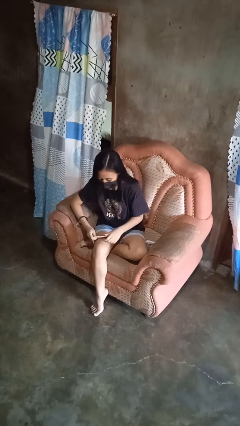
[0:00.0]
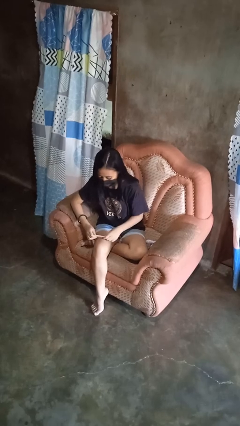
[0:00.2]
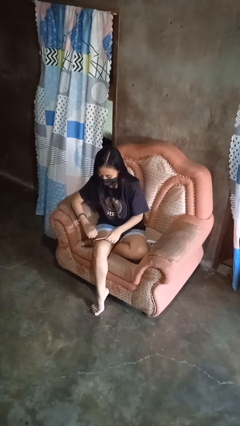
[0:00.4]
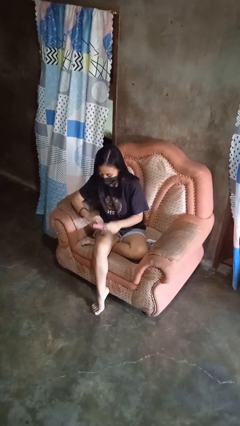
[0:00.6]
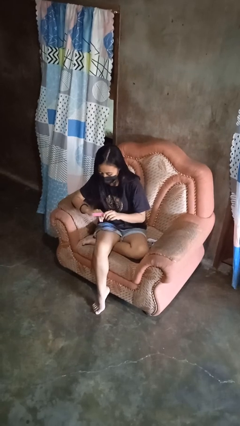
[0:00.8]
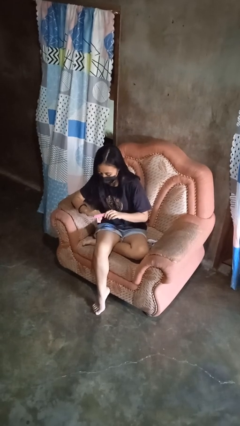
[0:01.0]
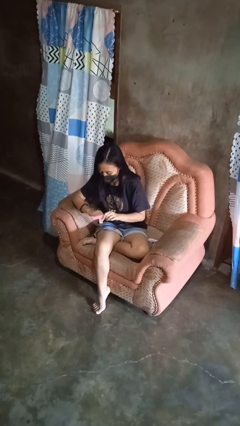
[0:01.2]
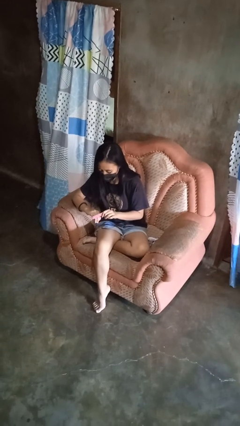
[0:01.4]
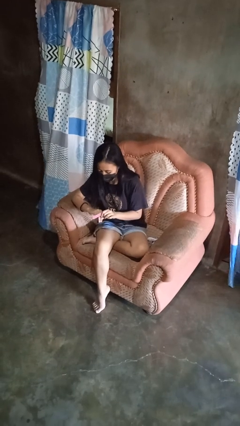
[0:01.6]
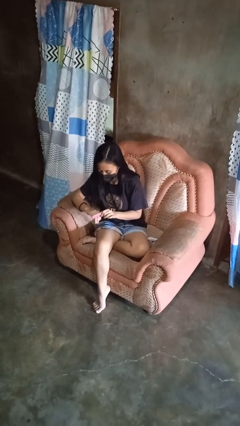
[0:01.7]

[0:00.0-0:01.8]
person files fingernails

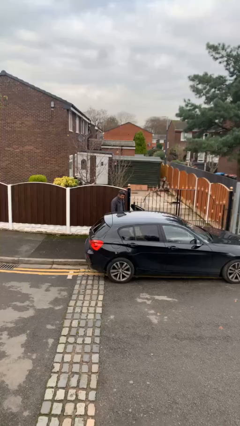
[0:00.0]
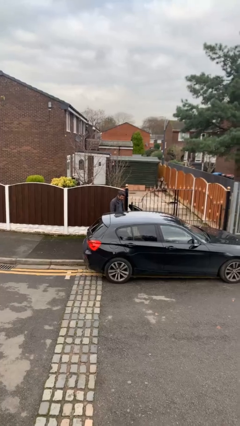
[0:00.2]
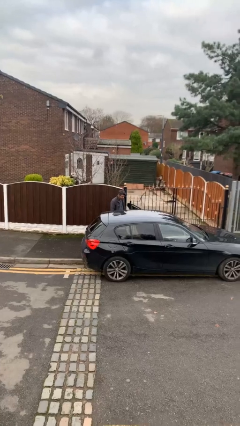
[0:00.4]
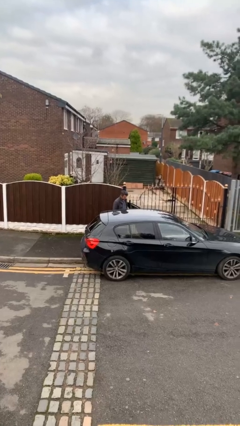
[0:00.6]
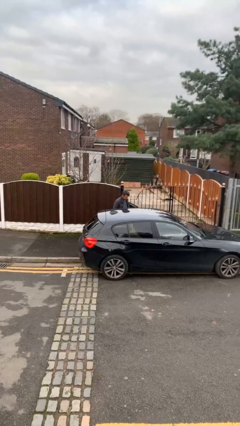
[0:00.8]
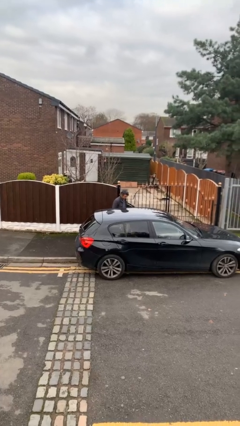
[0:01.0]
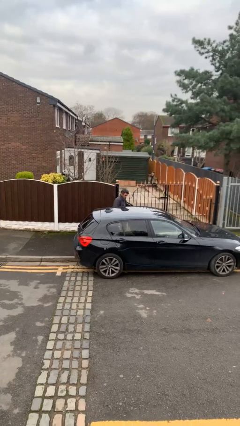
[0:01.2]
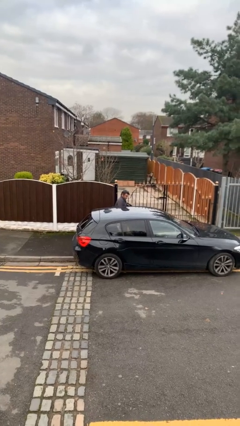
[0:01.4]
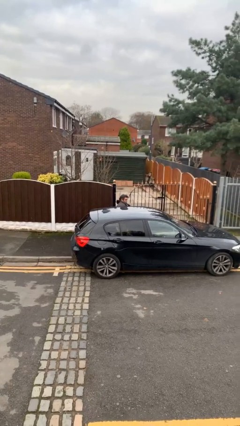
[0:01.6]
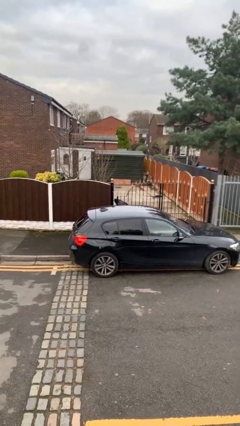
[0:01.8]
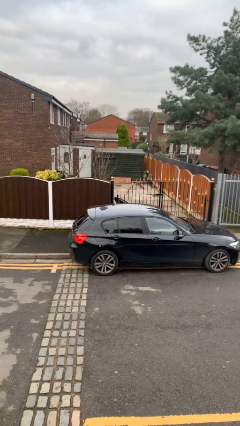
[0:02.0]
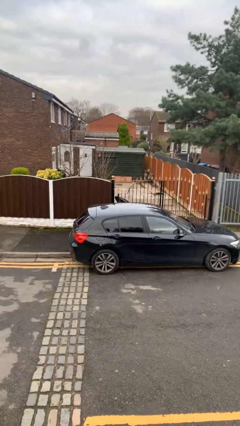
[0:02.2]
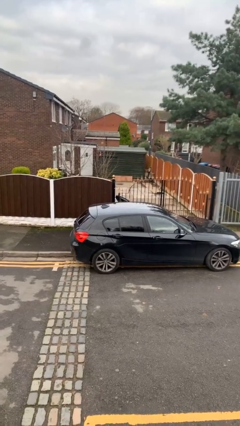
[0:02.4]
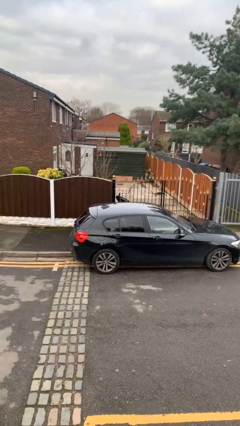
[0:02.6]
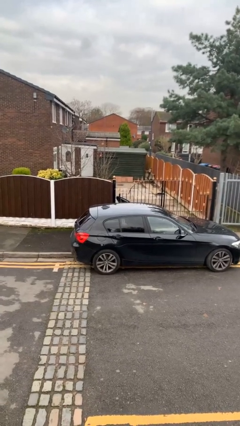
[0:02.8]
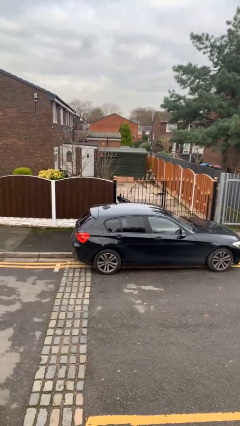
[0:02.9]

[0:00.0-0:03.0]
person enters car

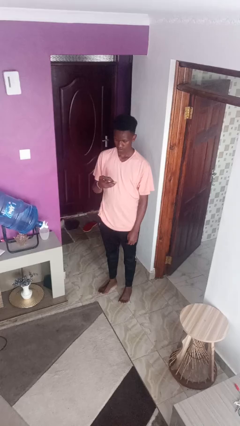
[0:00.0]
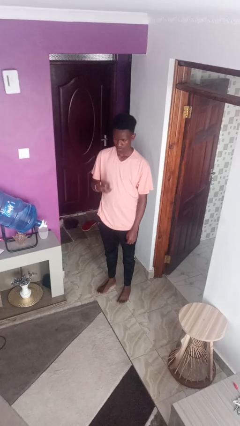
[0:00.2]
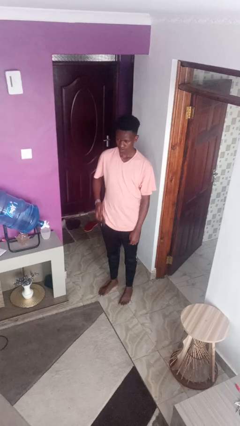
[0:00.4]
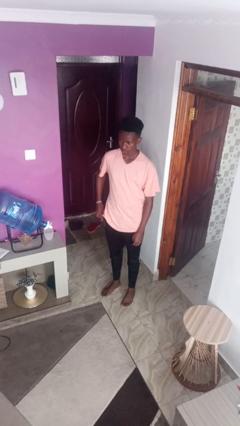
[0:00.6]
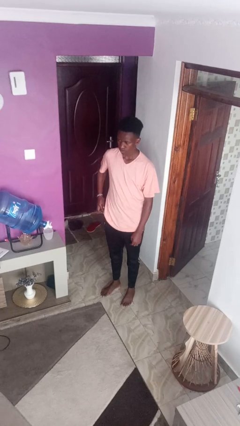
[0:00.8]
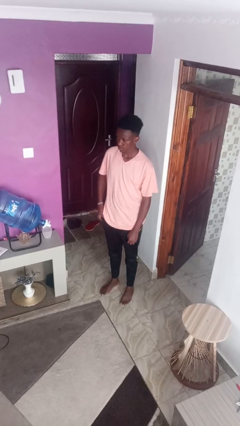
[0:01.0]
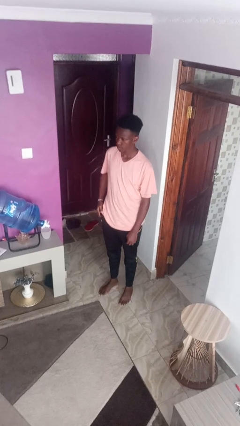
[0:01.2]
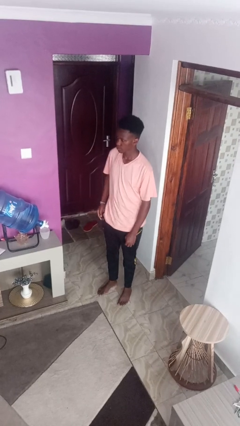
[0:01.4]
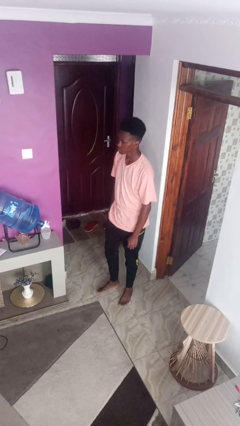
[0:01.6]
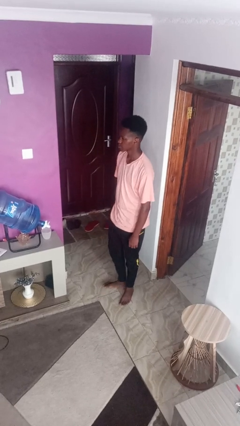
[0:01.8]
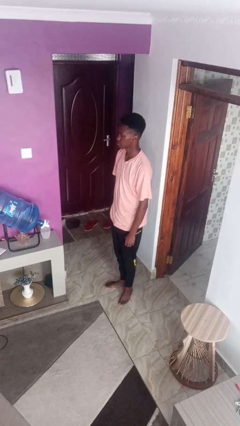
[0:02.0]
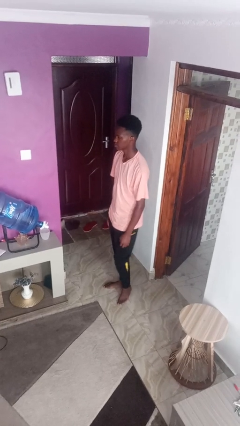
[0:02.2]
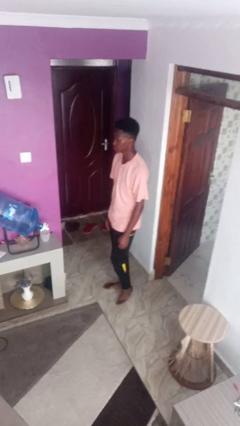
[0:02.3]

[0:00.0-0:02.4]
person puts phone into pocket

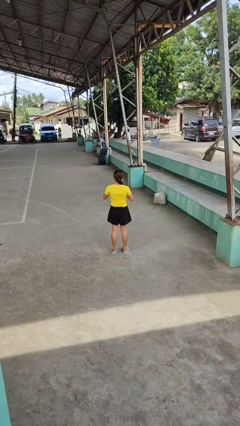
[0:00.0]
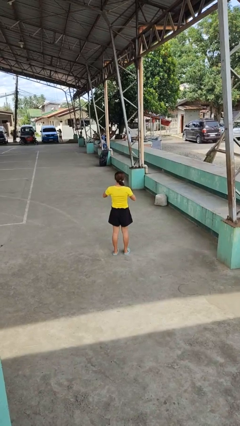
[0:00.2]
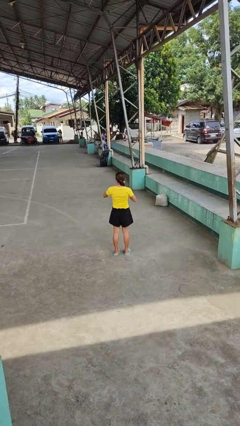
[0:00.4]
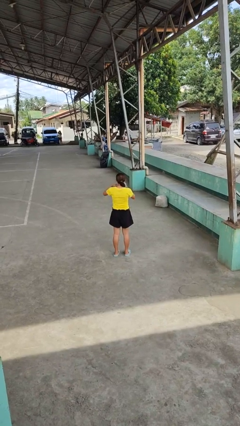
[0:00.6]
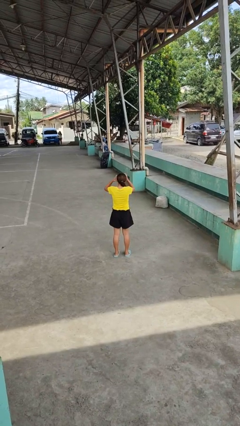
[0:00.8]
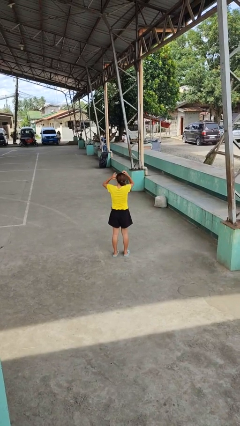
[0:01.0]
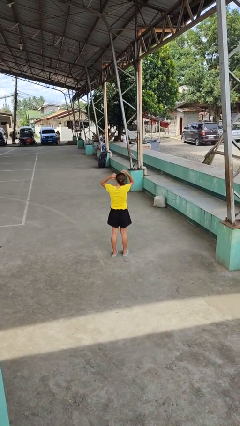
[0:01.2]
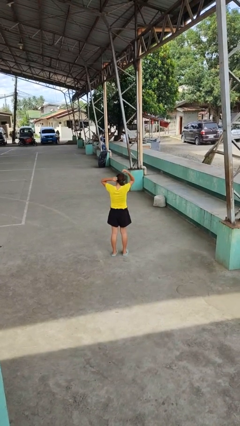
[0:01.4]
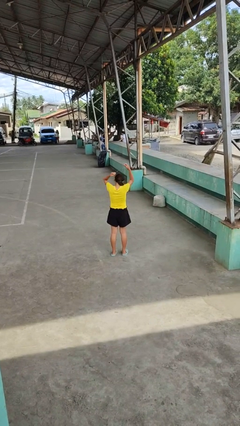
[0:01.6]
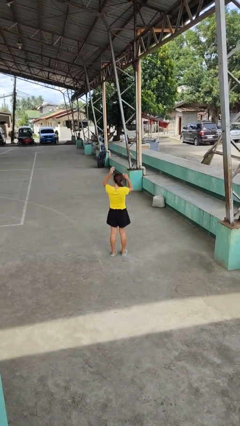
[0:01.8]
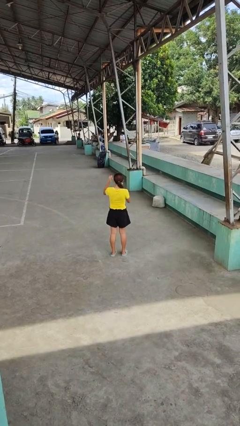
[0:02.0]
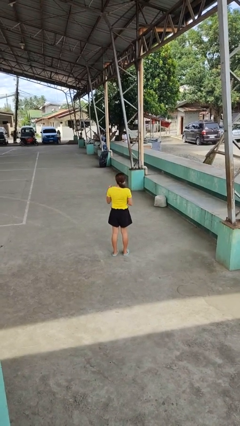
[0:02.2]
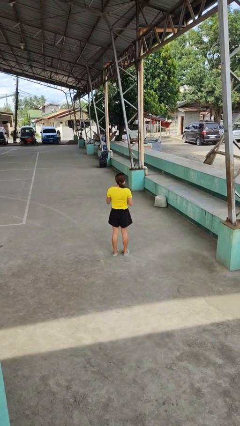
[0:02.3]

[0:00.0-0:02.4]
person takes off necklace

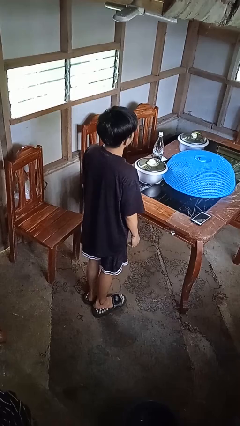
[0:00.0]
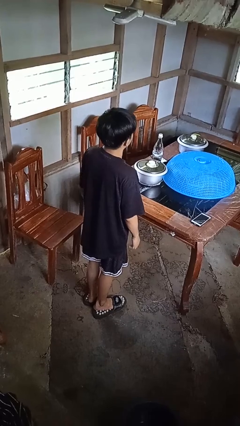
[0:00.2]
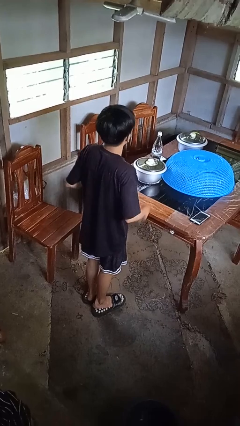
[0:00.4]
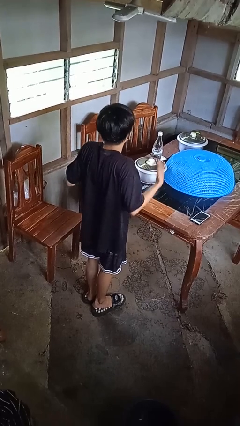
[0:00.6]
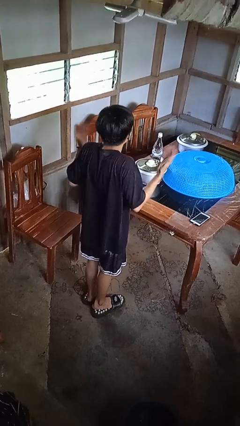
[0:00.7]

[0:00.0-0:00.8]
person shrugs

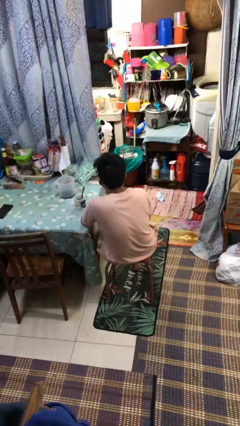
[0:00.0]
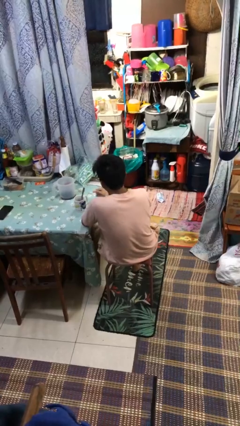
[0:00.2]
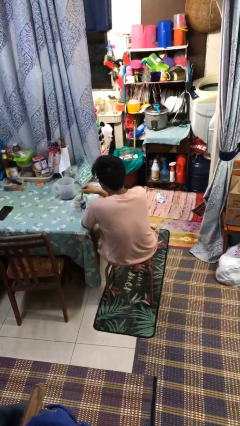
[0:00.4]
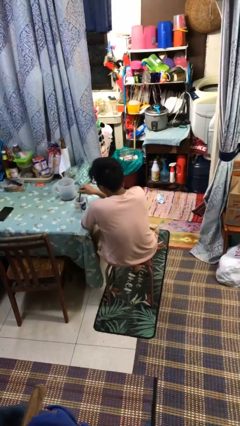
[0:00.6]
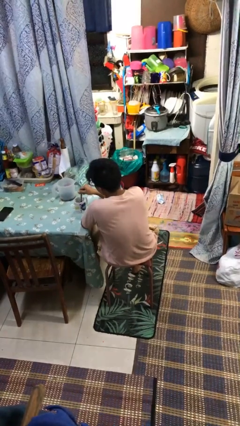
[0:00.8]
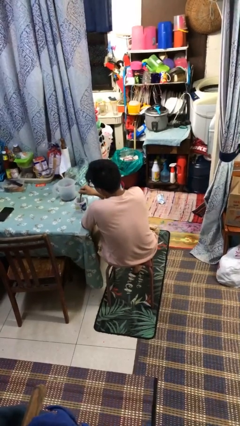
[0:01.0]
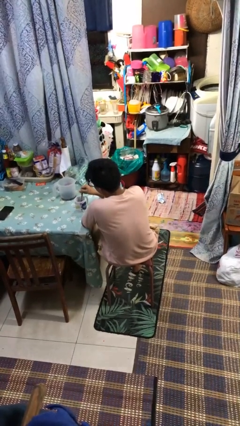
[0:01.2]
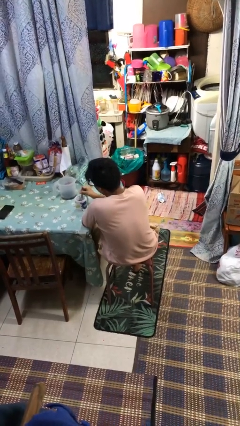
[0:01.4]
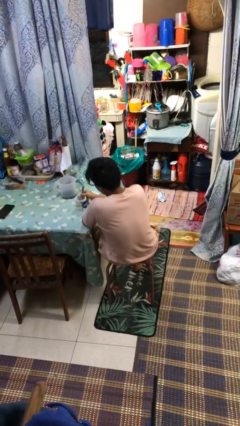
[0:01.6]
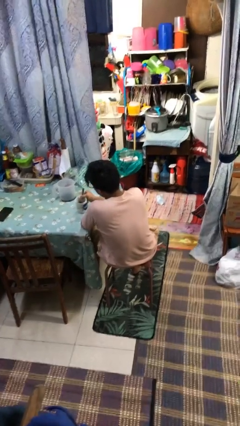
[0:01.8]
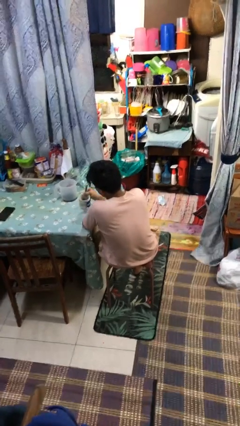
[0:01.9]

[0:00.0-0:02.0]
person stirs mug

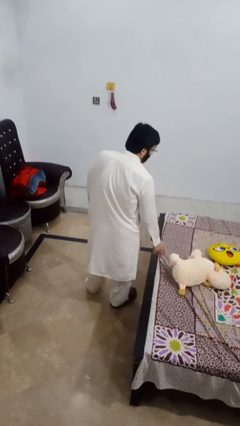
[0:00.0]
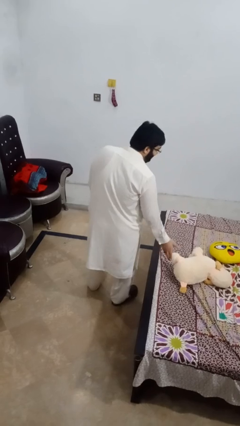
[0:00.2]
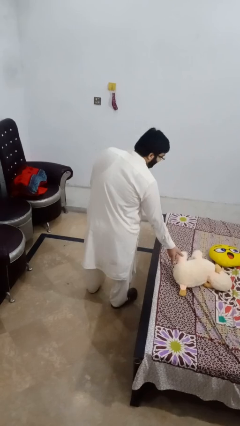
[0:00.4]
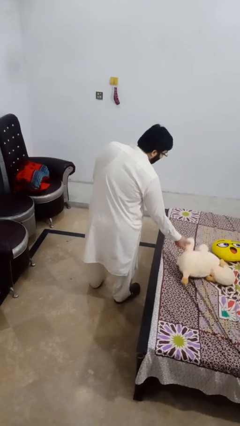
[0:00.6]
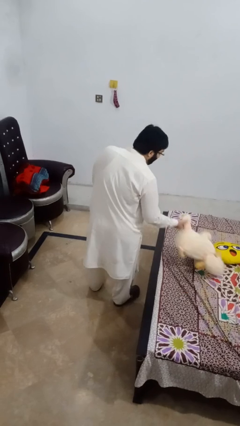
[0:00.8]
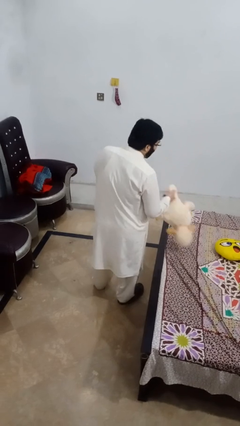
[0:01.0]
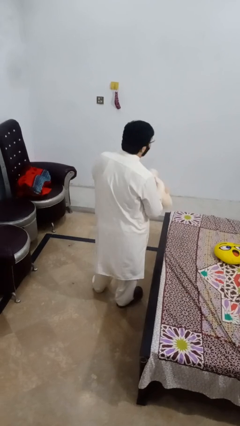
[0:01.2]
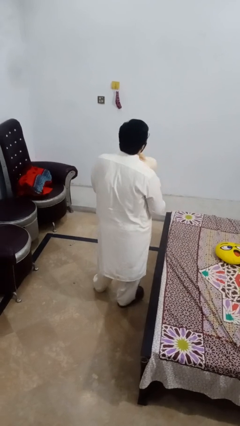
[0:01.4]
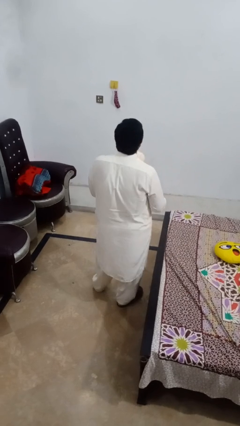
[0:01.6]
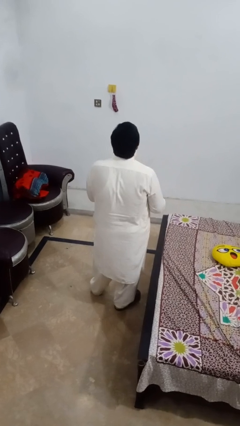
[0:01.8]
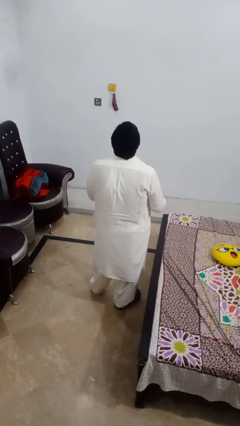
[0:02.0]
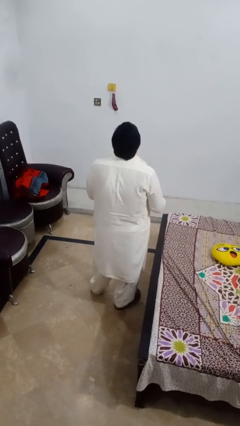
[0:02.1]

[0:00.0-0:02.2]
person picks up object from bed

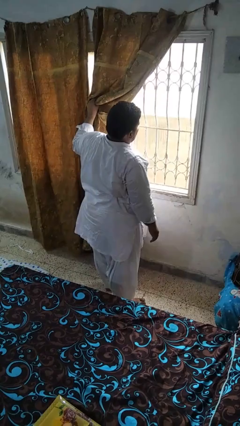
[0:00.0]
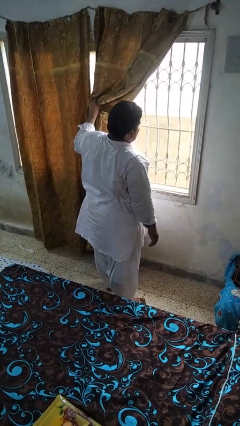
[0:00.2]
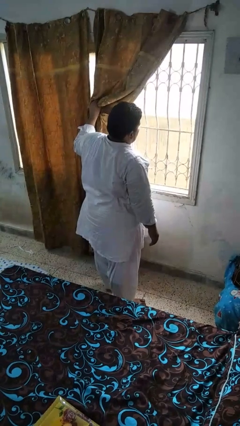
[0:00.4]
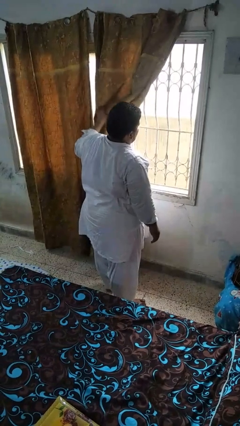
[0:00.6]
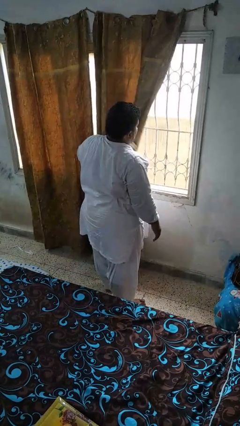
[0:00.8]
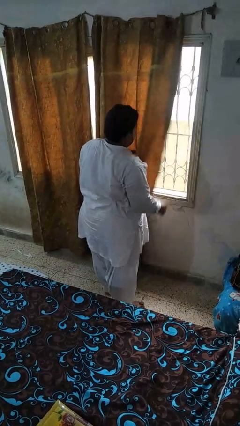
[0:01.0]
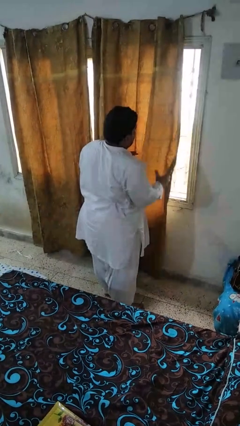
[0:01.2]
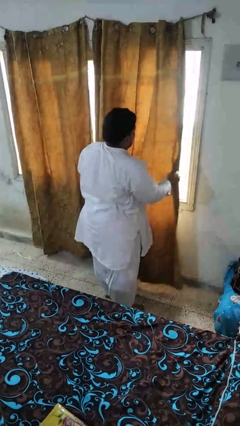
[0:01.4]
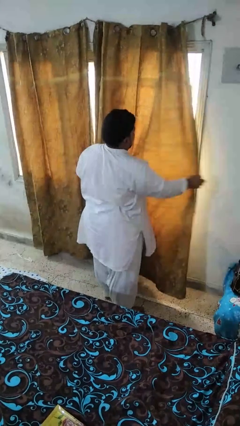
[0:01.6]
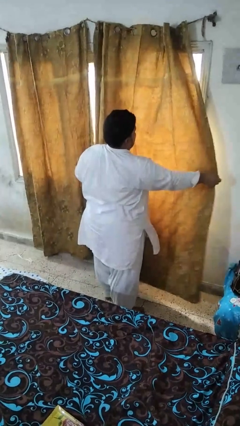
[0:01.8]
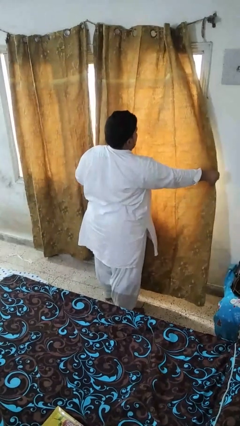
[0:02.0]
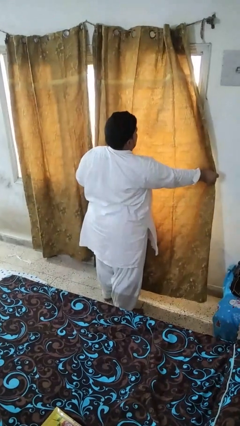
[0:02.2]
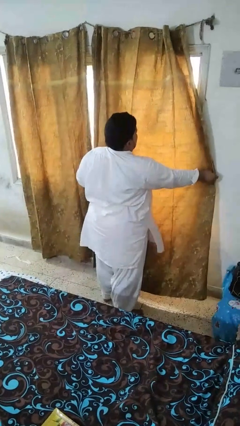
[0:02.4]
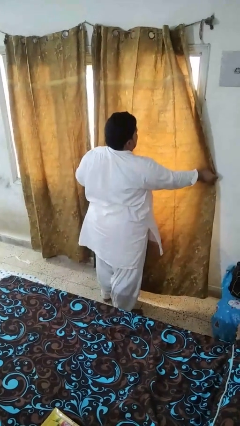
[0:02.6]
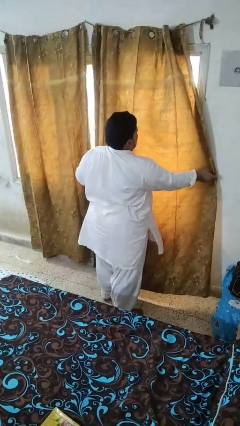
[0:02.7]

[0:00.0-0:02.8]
person closes curtains
